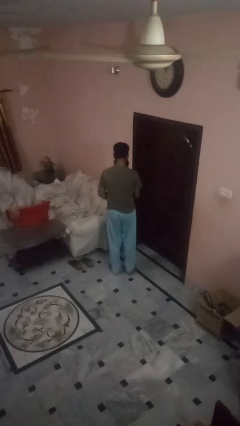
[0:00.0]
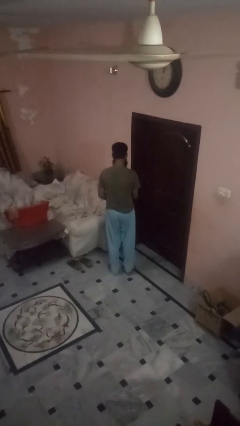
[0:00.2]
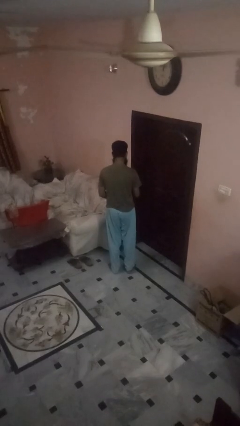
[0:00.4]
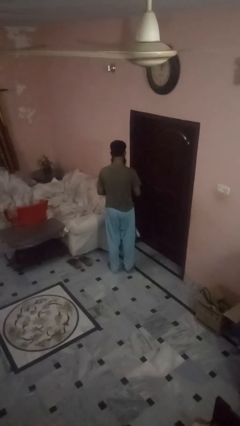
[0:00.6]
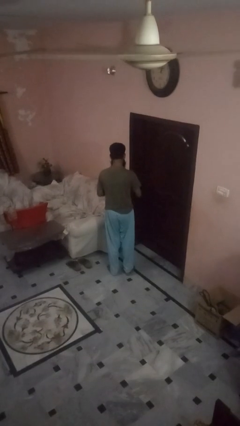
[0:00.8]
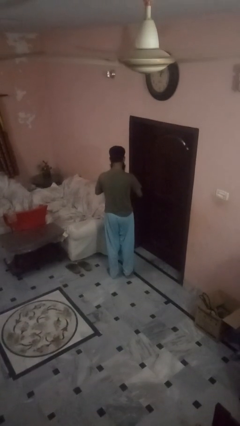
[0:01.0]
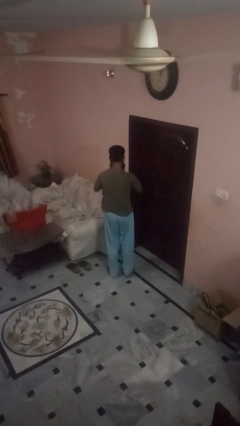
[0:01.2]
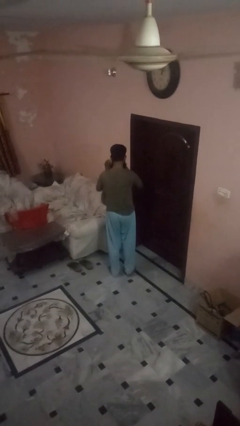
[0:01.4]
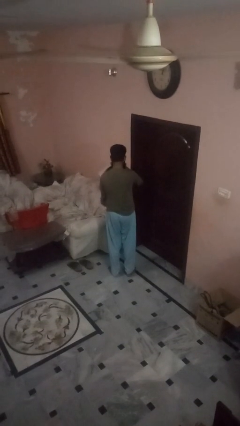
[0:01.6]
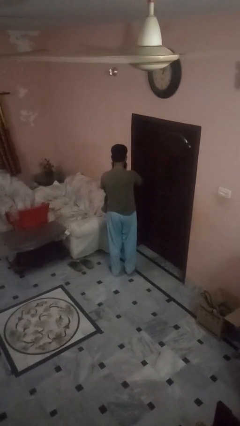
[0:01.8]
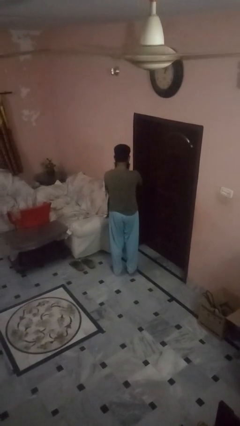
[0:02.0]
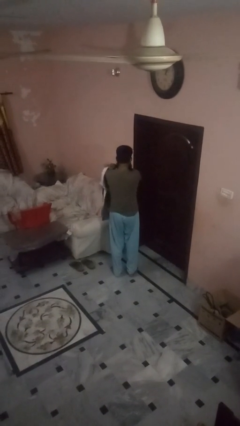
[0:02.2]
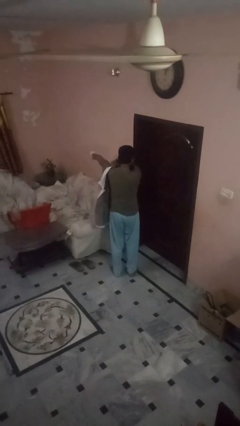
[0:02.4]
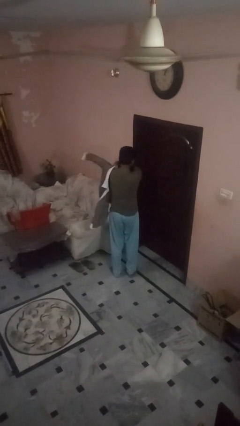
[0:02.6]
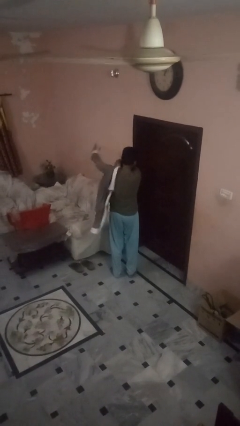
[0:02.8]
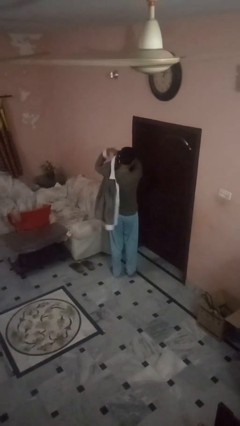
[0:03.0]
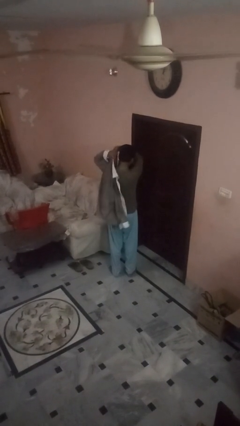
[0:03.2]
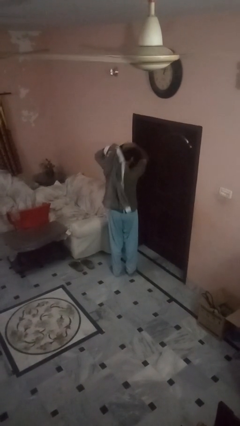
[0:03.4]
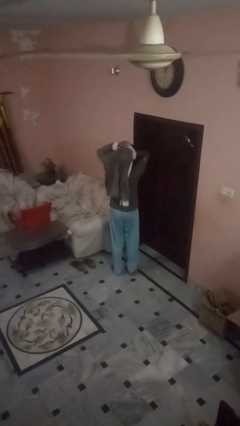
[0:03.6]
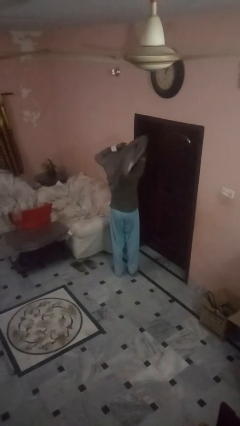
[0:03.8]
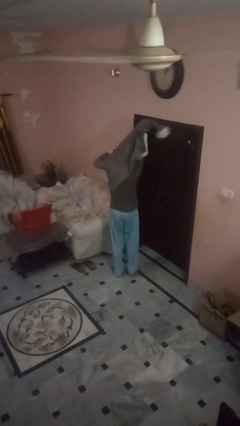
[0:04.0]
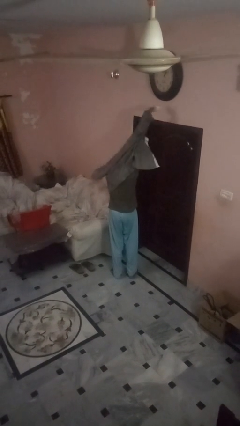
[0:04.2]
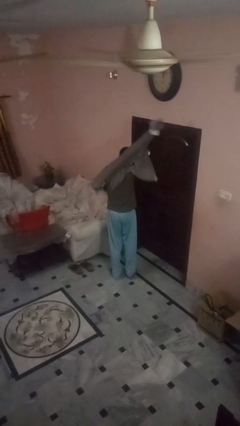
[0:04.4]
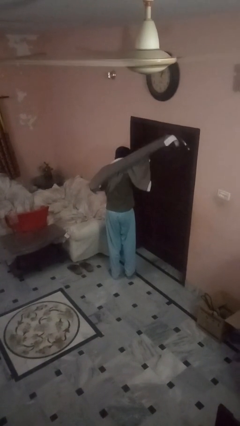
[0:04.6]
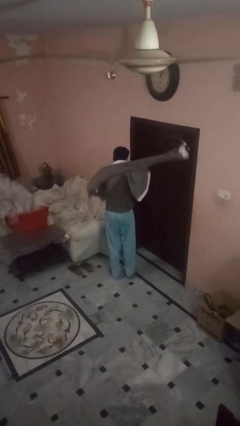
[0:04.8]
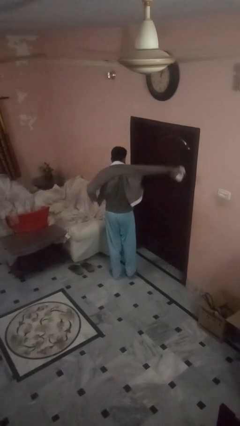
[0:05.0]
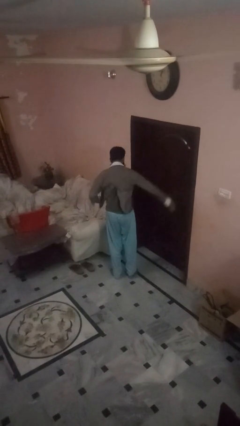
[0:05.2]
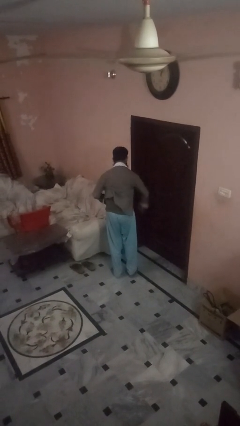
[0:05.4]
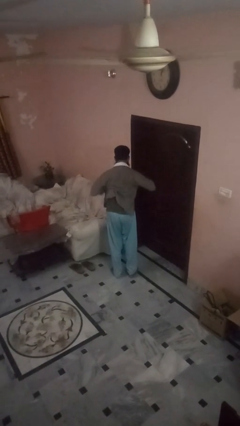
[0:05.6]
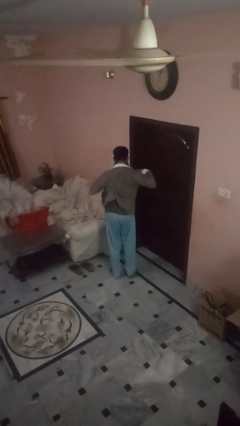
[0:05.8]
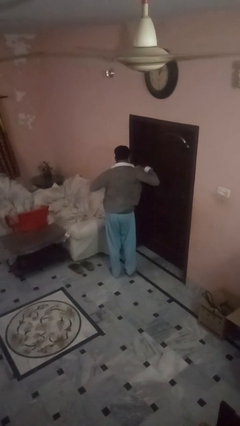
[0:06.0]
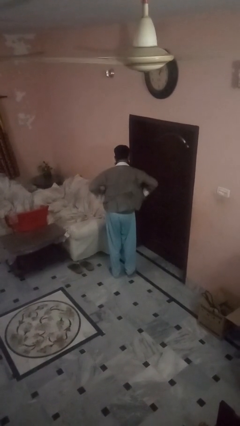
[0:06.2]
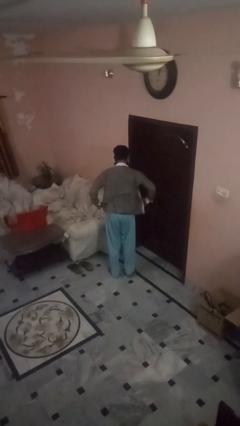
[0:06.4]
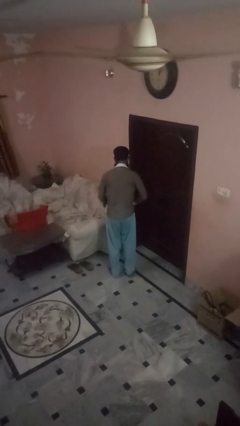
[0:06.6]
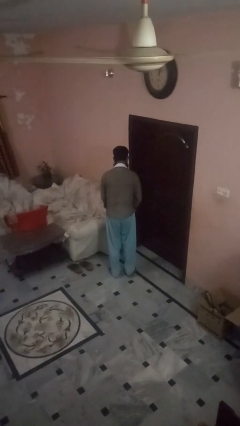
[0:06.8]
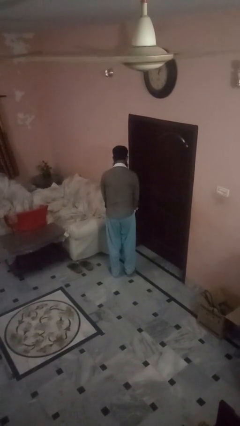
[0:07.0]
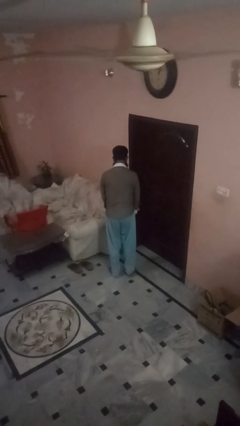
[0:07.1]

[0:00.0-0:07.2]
person puts on shirt

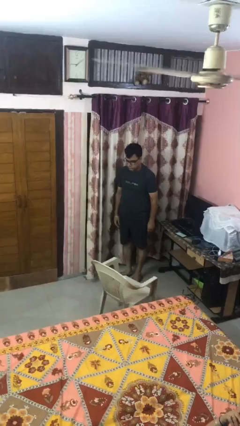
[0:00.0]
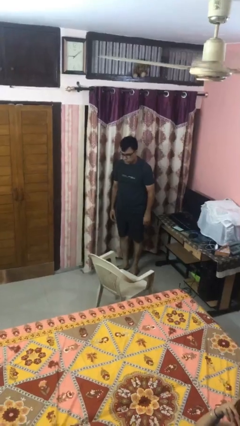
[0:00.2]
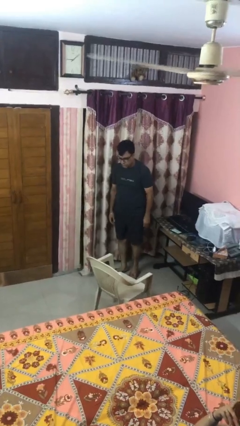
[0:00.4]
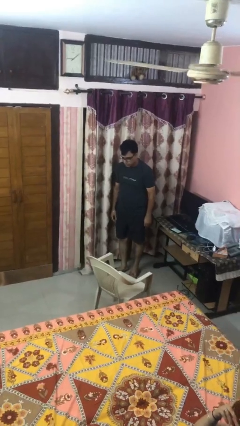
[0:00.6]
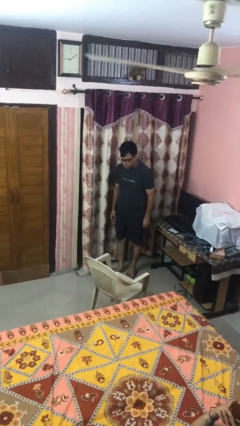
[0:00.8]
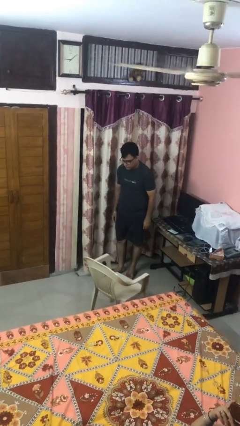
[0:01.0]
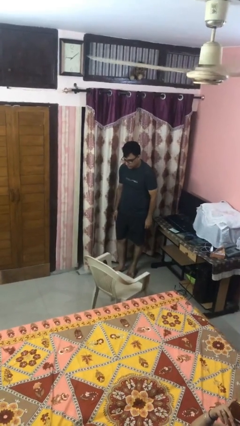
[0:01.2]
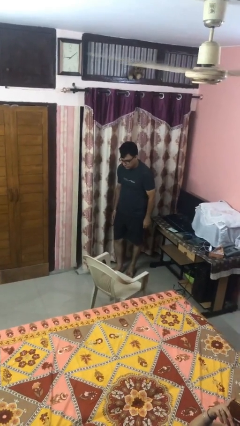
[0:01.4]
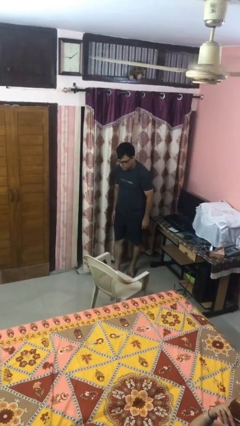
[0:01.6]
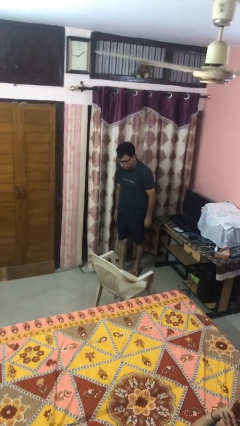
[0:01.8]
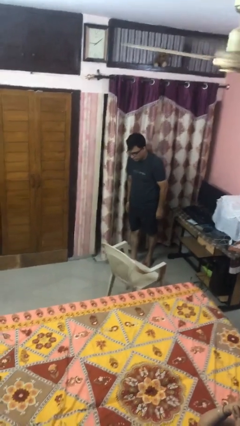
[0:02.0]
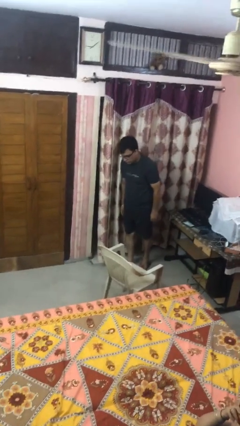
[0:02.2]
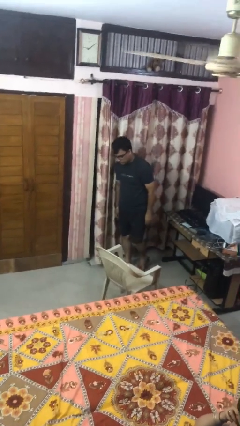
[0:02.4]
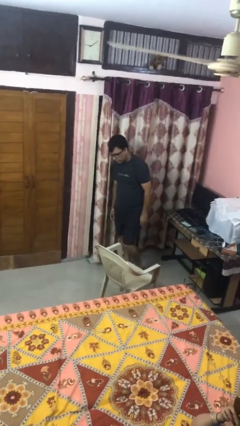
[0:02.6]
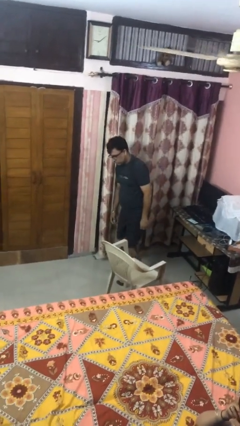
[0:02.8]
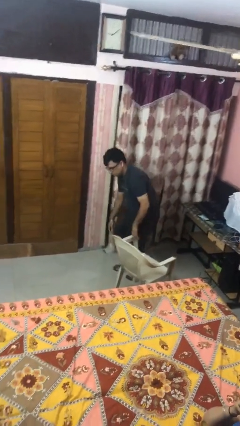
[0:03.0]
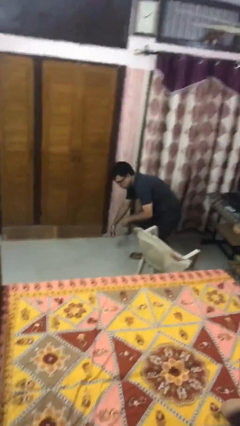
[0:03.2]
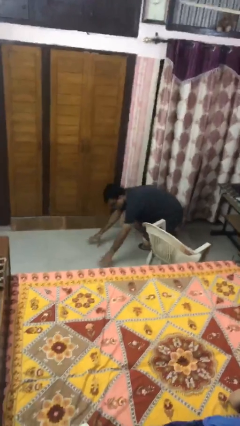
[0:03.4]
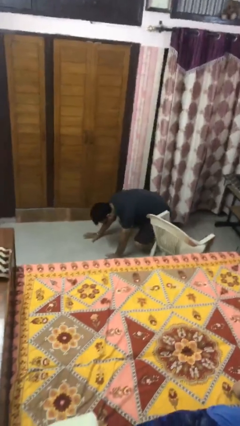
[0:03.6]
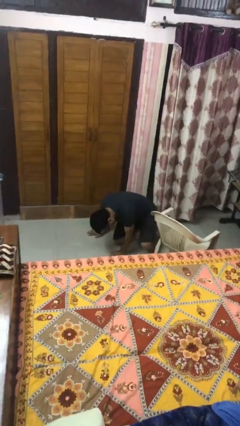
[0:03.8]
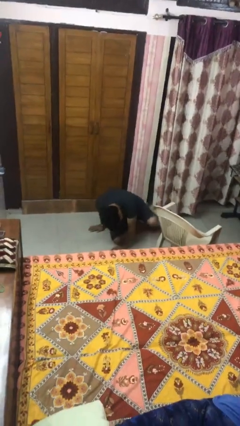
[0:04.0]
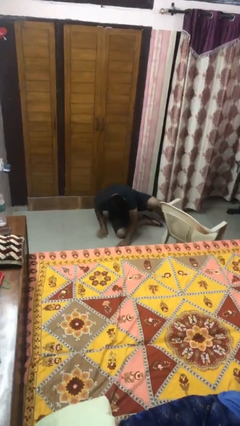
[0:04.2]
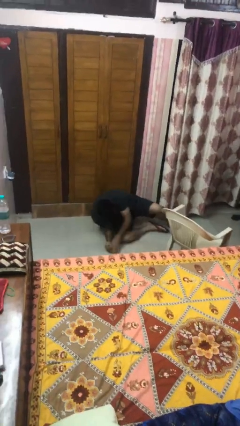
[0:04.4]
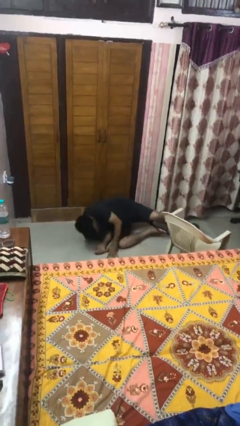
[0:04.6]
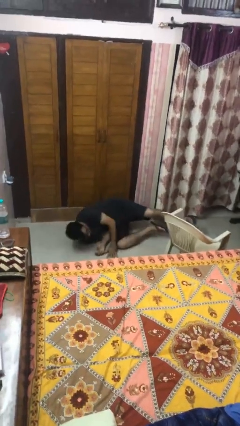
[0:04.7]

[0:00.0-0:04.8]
person trips on object on floor

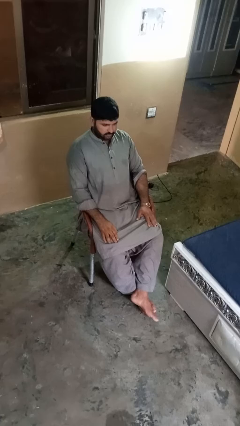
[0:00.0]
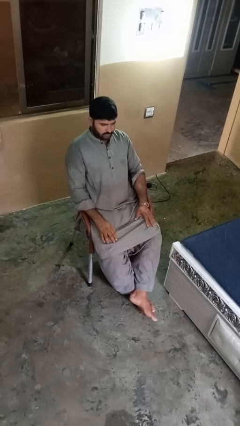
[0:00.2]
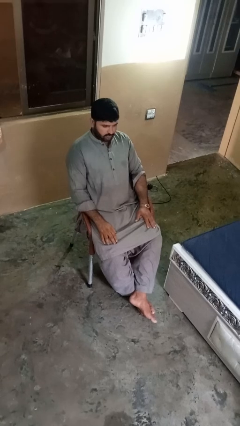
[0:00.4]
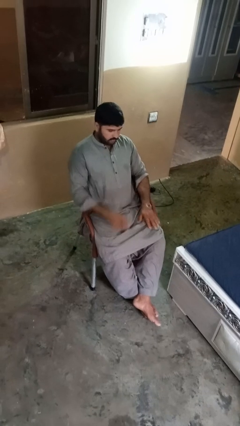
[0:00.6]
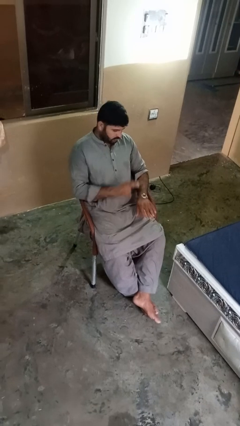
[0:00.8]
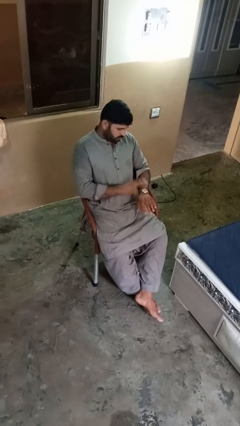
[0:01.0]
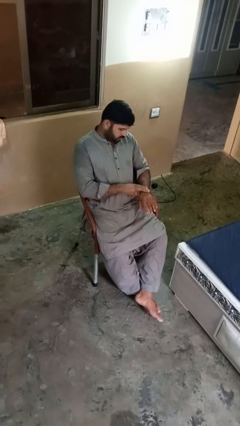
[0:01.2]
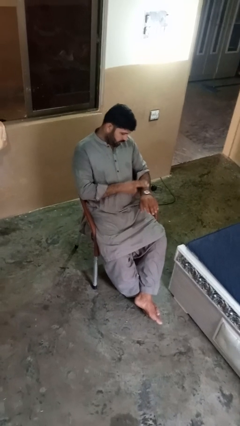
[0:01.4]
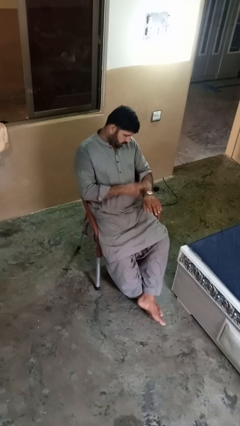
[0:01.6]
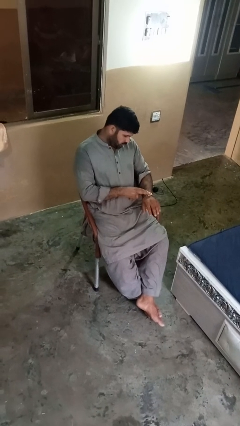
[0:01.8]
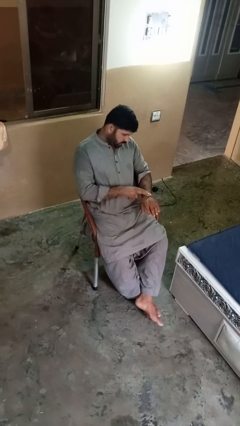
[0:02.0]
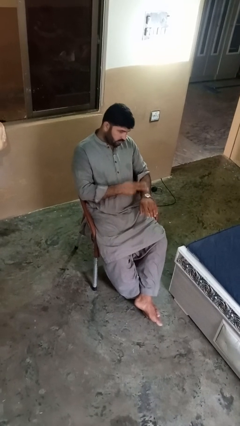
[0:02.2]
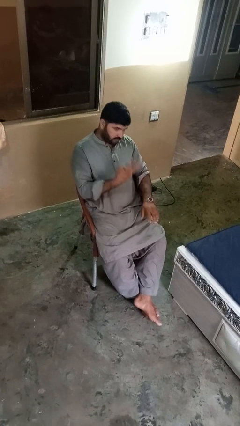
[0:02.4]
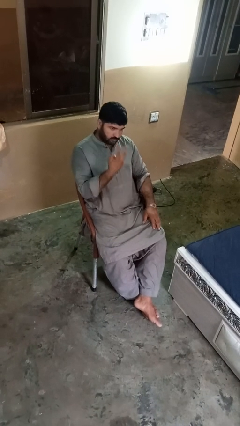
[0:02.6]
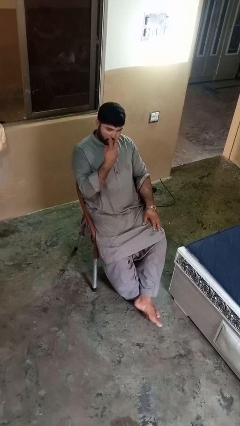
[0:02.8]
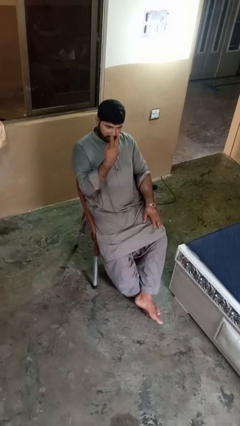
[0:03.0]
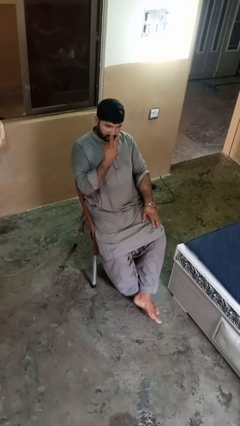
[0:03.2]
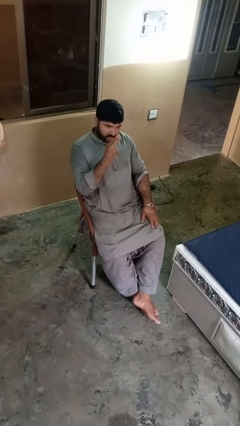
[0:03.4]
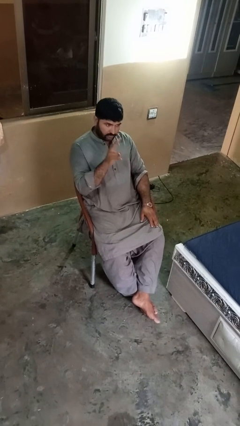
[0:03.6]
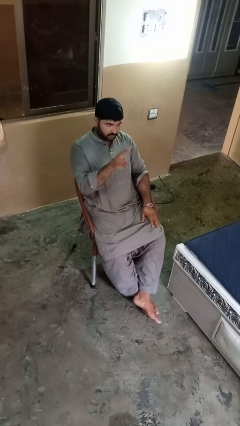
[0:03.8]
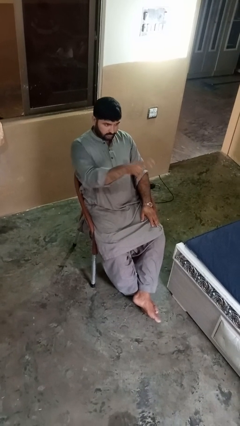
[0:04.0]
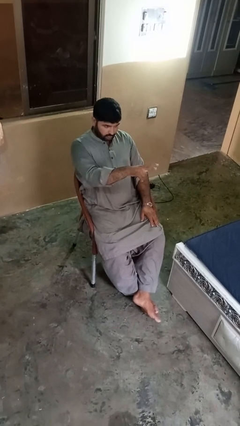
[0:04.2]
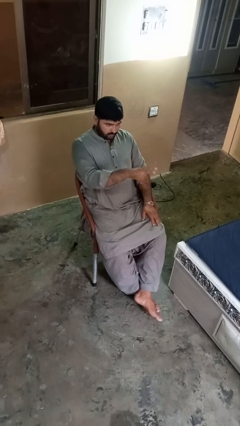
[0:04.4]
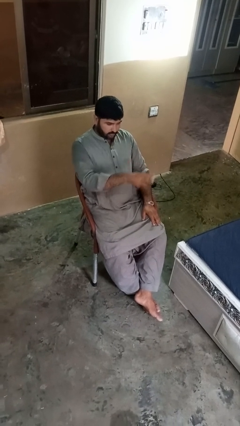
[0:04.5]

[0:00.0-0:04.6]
person gestures watch closely

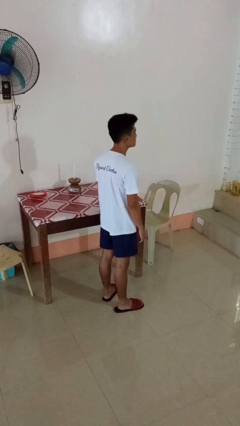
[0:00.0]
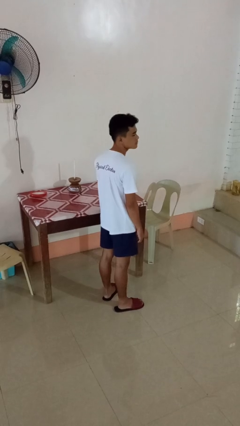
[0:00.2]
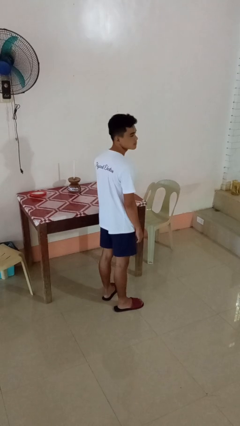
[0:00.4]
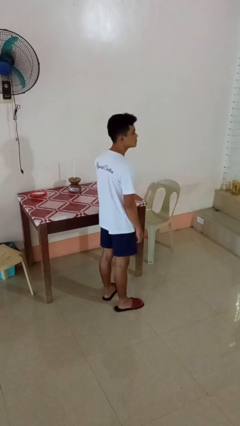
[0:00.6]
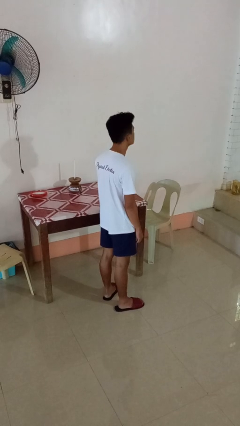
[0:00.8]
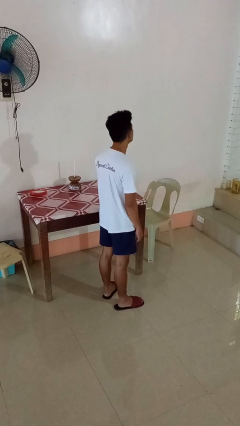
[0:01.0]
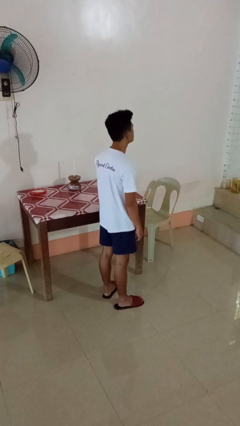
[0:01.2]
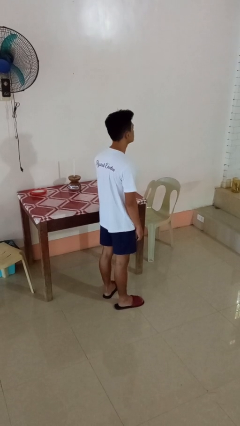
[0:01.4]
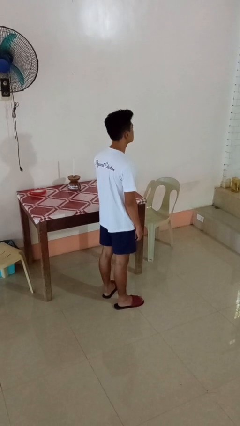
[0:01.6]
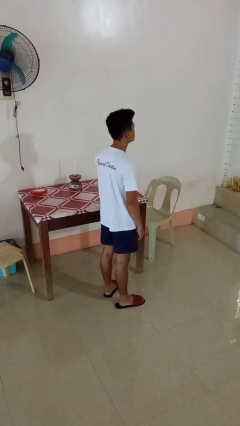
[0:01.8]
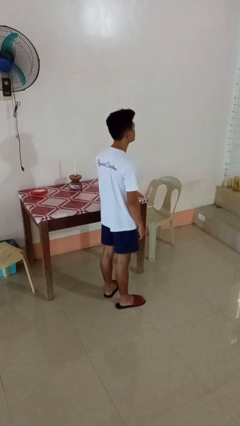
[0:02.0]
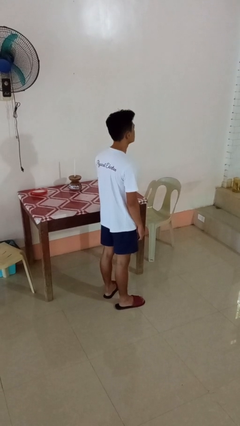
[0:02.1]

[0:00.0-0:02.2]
person shakes head
